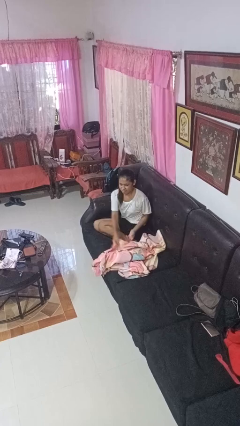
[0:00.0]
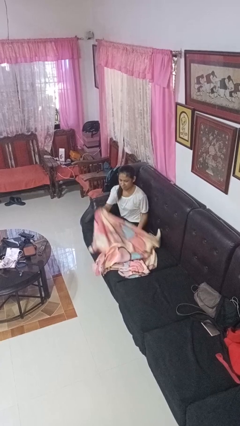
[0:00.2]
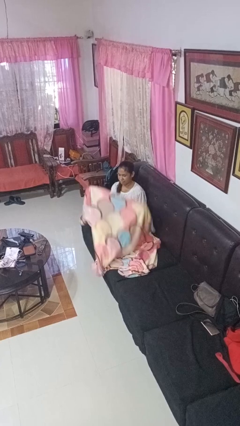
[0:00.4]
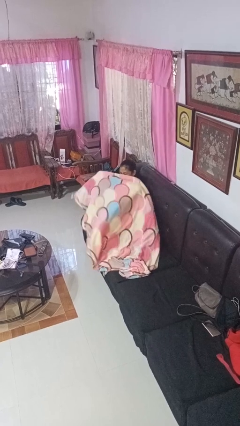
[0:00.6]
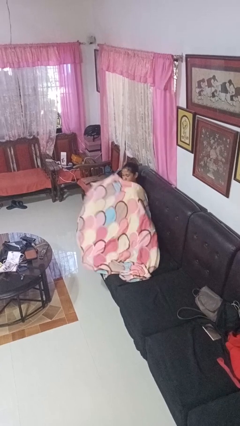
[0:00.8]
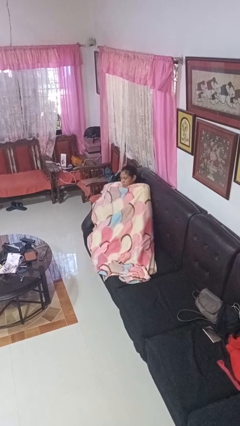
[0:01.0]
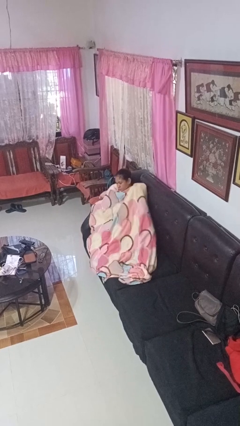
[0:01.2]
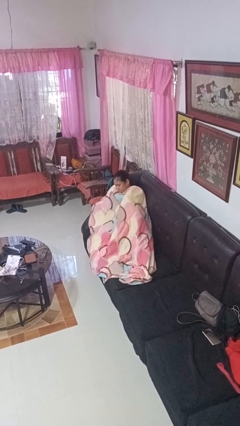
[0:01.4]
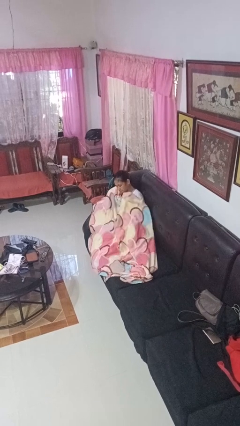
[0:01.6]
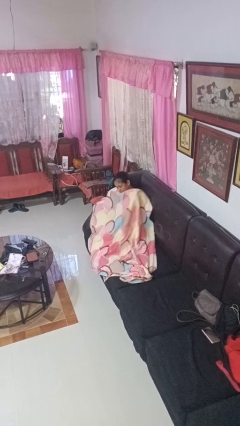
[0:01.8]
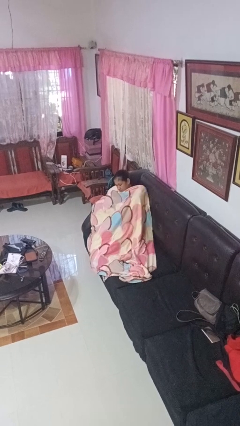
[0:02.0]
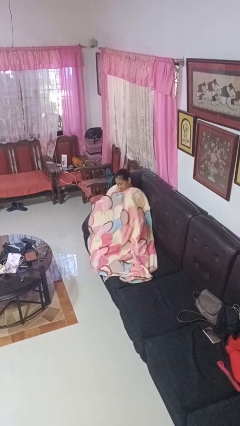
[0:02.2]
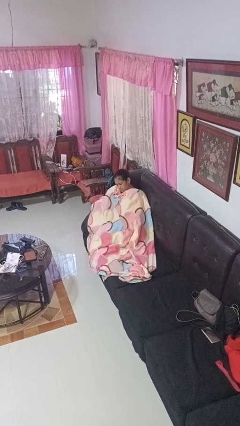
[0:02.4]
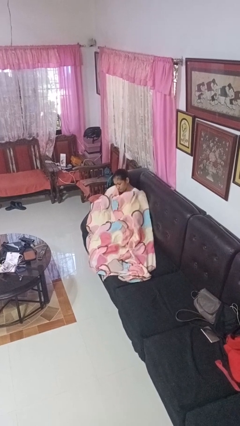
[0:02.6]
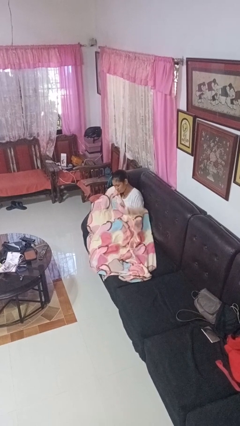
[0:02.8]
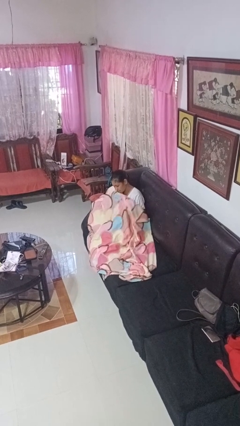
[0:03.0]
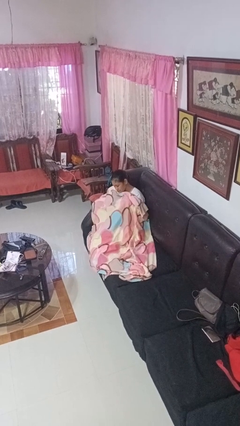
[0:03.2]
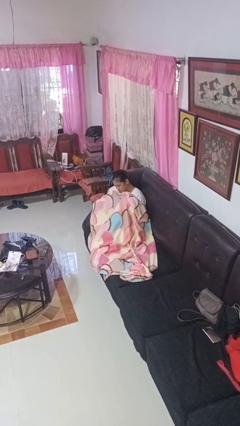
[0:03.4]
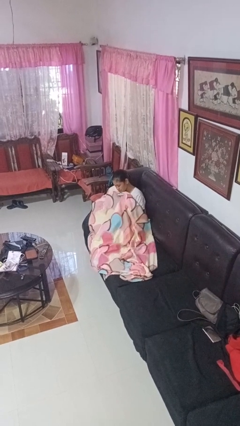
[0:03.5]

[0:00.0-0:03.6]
person covers with blanket

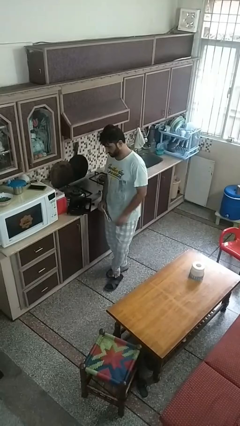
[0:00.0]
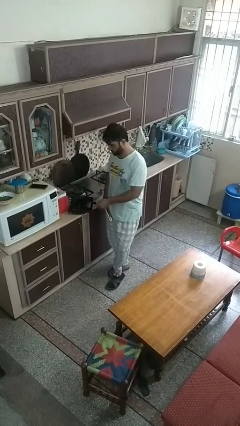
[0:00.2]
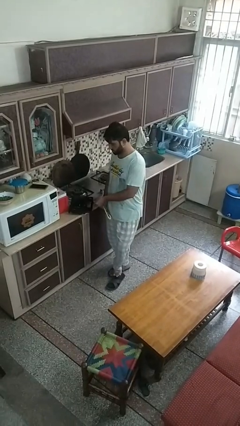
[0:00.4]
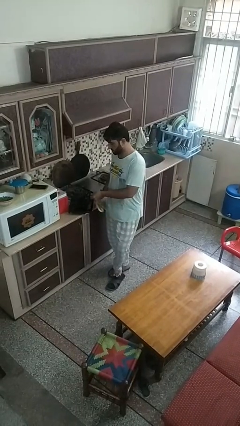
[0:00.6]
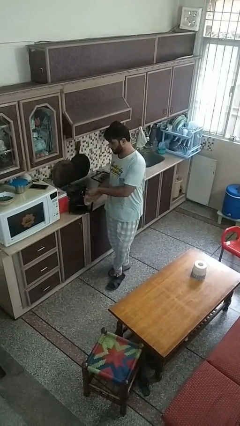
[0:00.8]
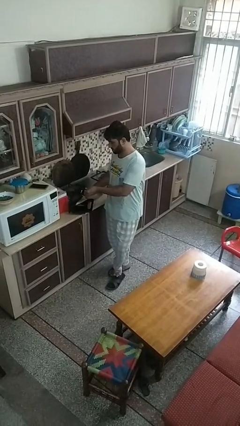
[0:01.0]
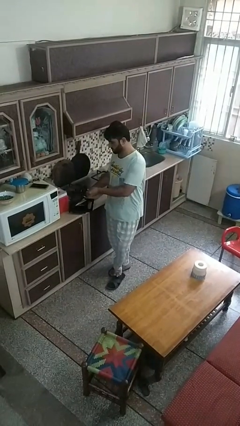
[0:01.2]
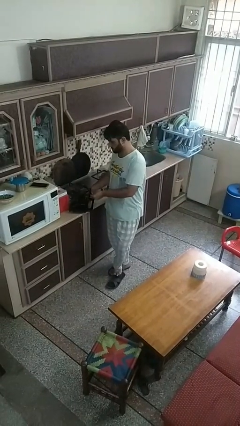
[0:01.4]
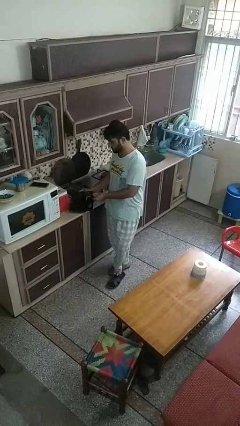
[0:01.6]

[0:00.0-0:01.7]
person puts object into toaster

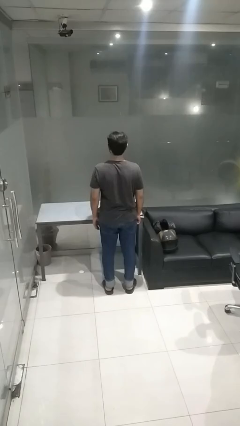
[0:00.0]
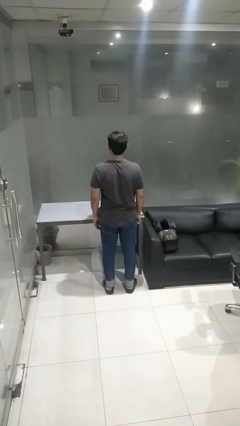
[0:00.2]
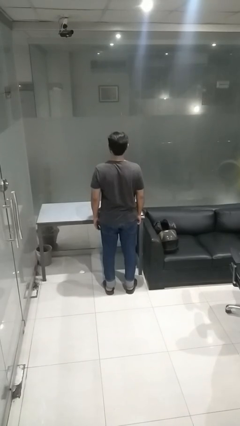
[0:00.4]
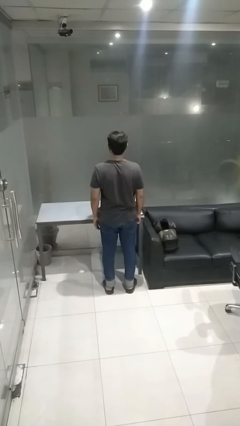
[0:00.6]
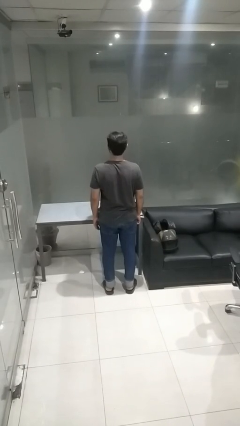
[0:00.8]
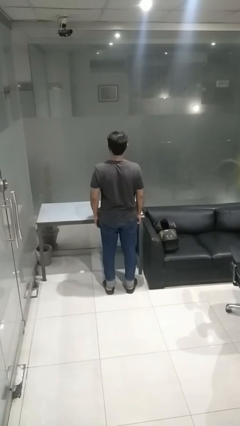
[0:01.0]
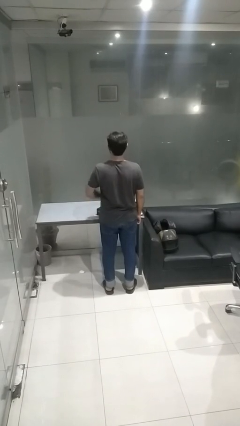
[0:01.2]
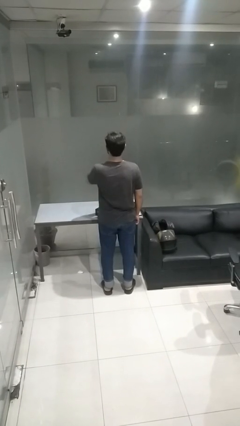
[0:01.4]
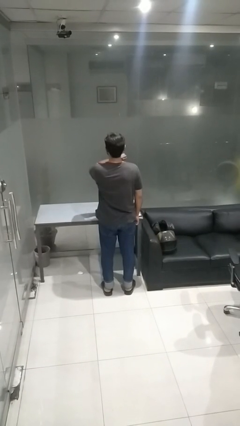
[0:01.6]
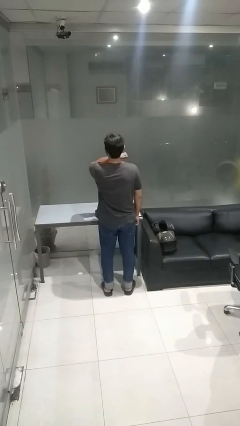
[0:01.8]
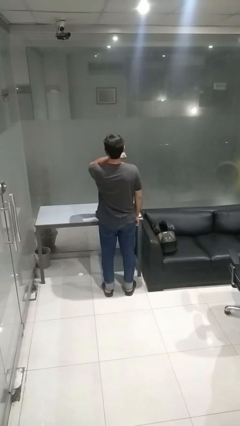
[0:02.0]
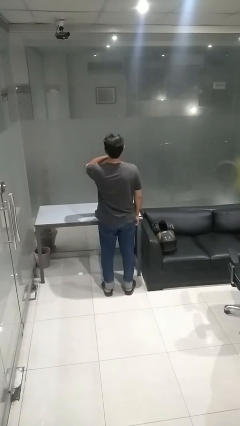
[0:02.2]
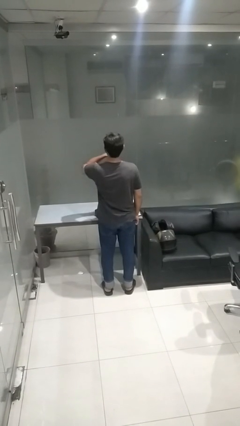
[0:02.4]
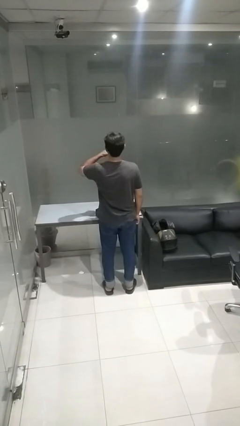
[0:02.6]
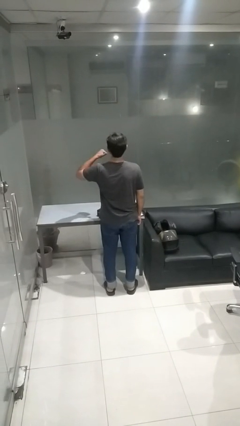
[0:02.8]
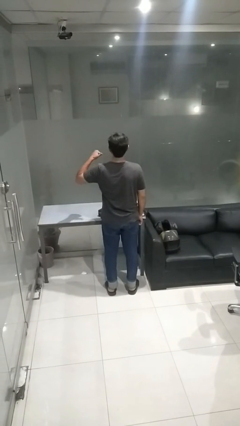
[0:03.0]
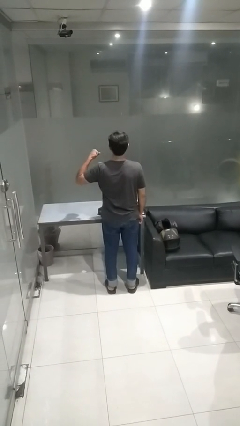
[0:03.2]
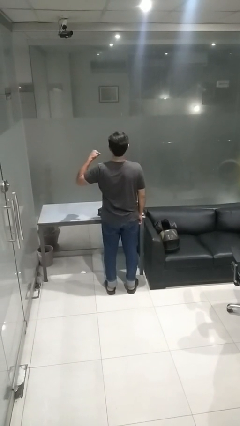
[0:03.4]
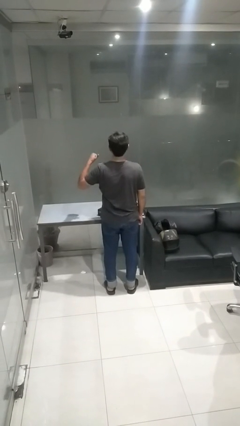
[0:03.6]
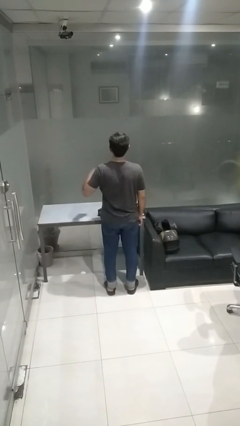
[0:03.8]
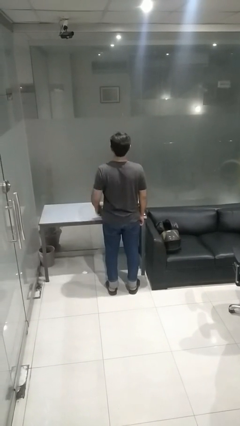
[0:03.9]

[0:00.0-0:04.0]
person gestures cut

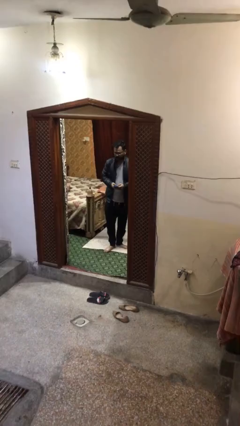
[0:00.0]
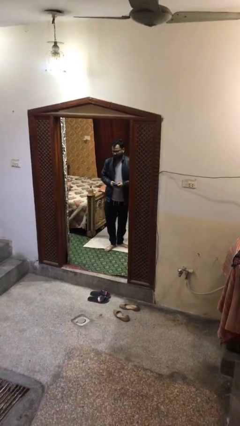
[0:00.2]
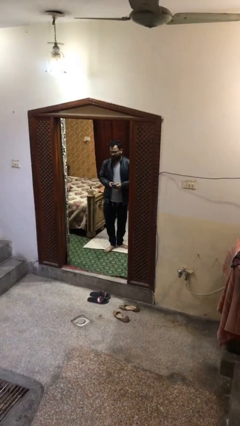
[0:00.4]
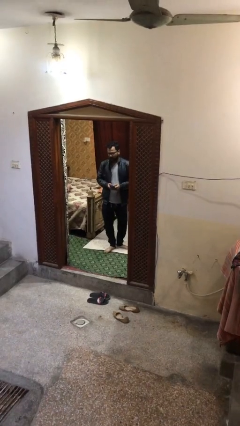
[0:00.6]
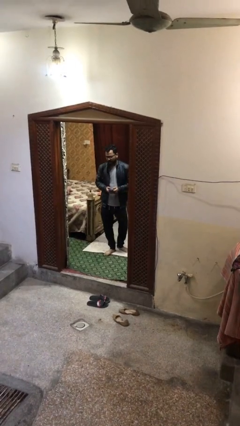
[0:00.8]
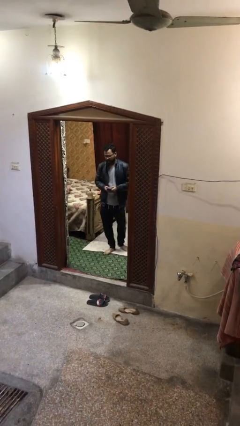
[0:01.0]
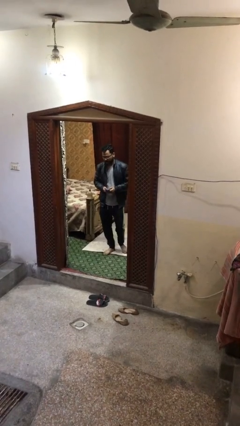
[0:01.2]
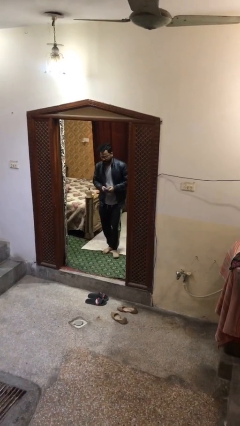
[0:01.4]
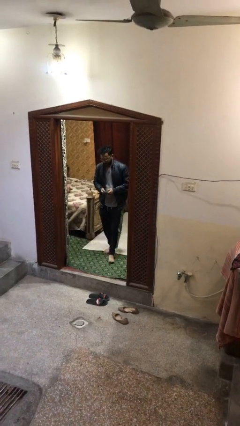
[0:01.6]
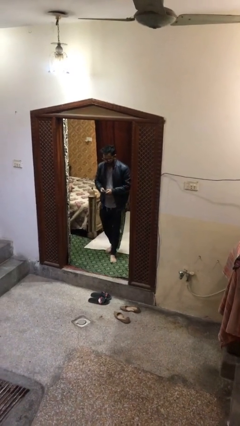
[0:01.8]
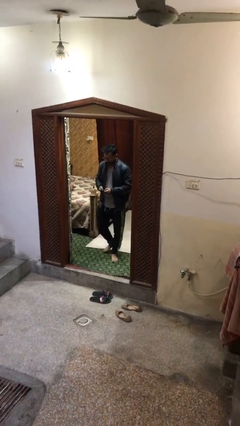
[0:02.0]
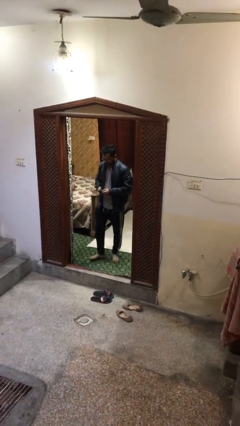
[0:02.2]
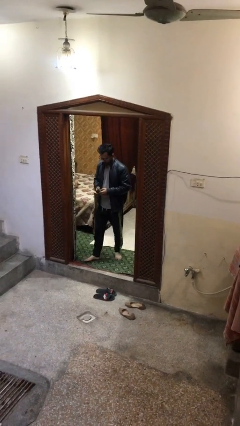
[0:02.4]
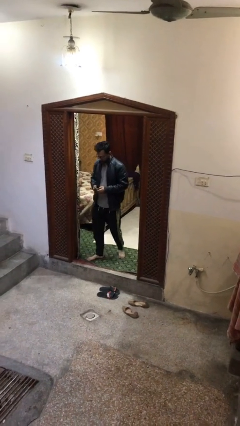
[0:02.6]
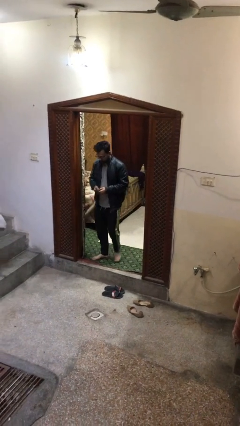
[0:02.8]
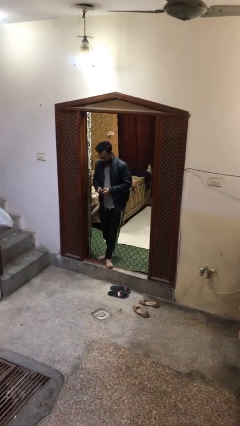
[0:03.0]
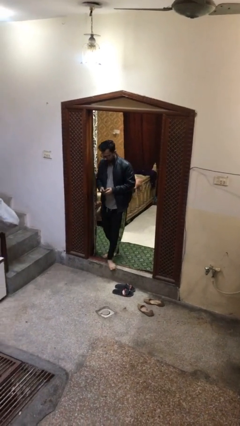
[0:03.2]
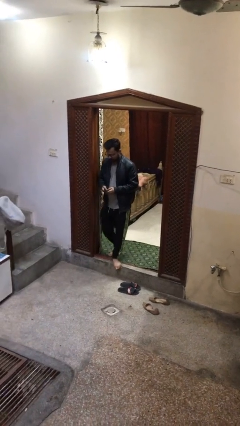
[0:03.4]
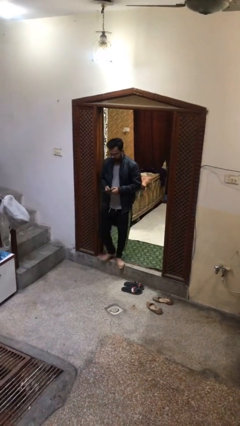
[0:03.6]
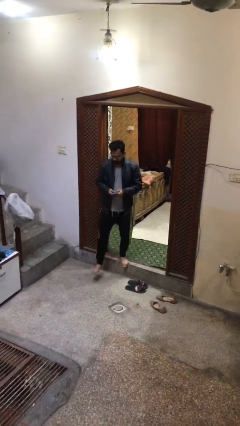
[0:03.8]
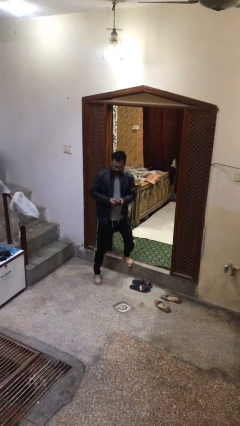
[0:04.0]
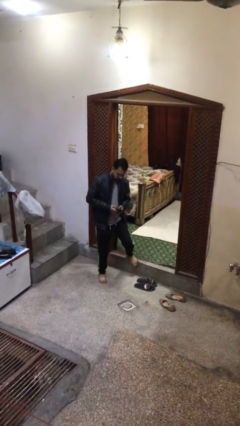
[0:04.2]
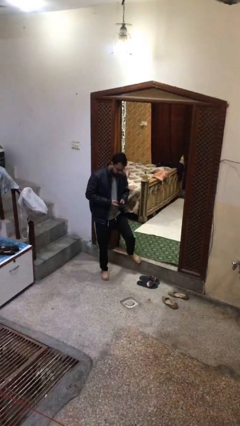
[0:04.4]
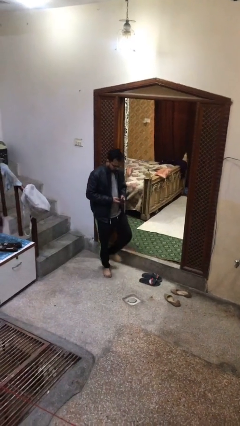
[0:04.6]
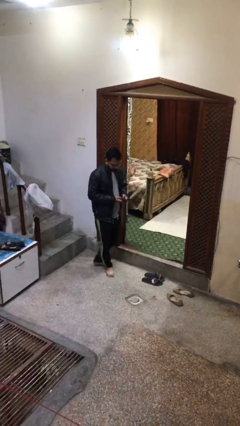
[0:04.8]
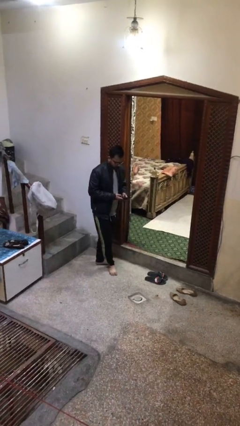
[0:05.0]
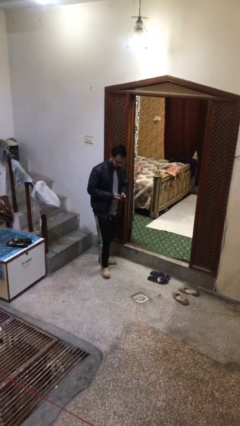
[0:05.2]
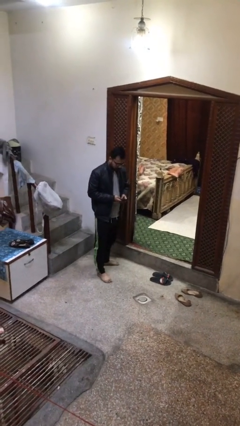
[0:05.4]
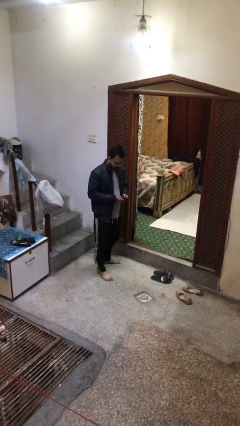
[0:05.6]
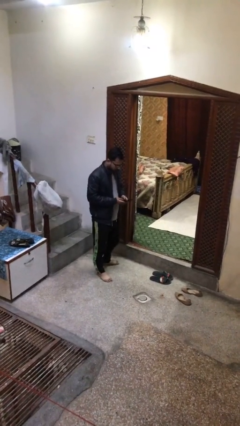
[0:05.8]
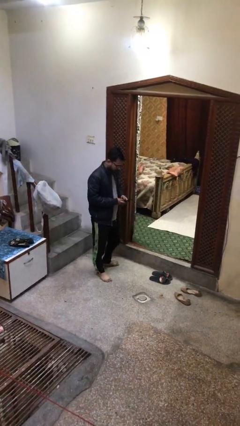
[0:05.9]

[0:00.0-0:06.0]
person enters scene through structure

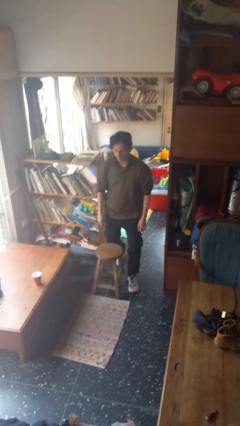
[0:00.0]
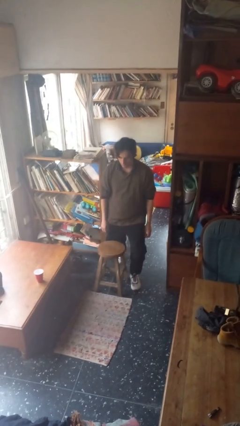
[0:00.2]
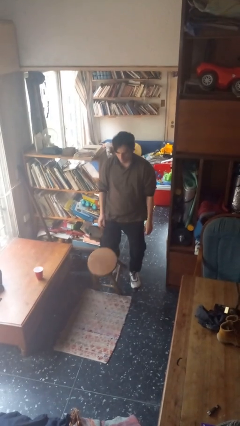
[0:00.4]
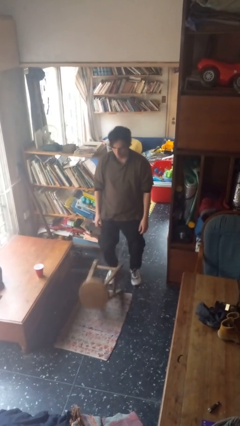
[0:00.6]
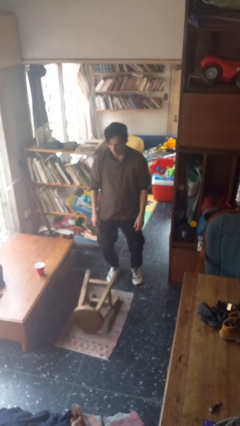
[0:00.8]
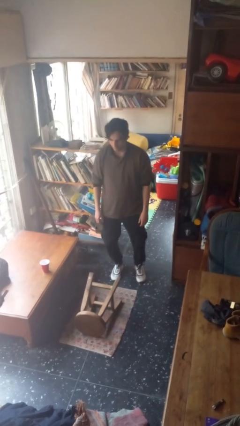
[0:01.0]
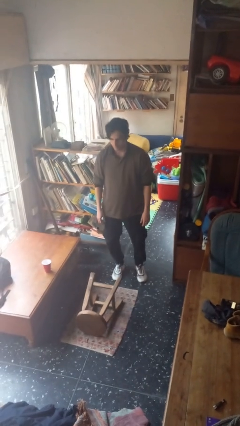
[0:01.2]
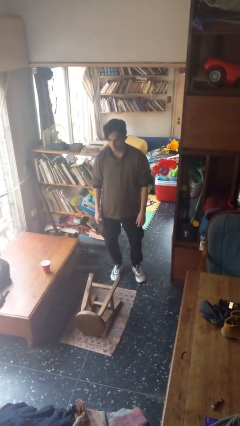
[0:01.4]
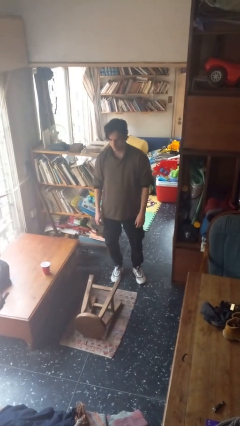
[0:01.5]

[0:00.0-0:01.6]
person knocks over furniture

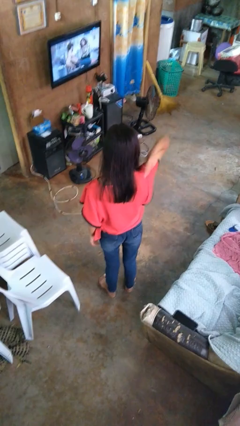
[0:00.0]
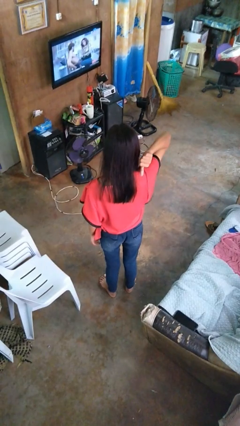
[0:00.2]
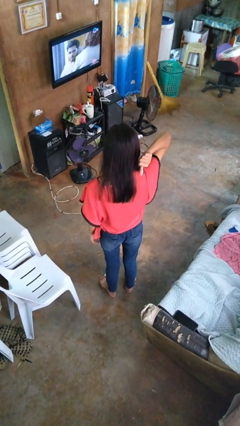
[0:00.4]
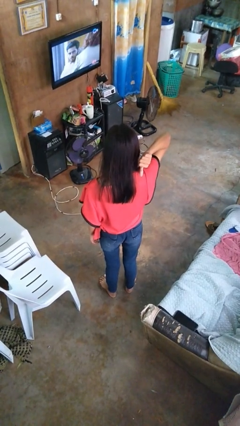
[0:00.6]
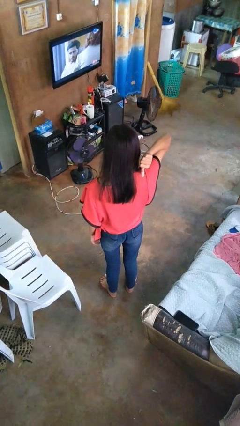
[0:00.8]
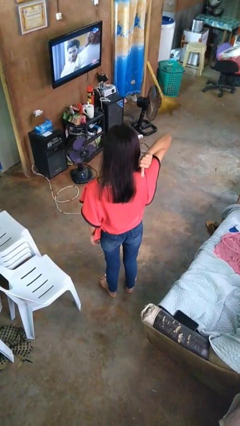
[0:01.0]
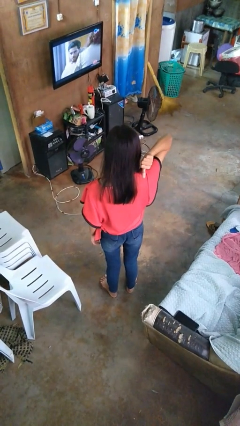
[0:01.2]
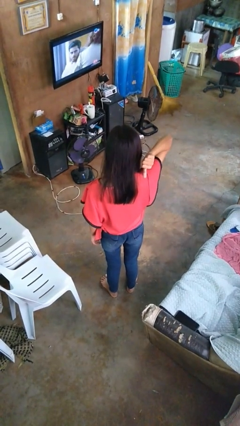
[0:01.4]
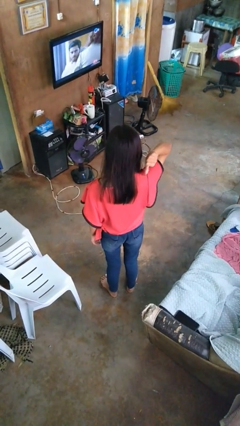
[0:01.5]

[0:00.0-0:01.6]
person gestures behind me
